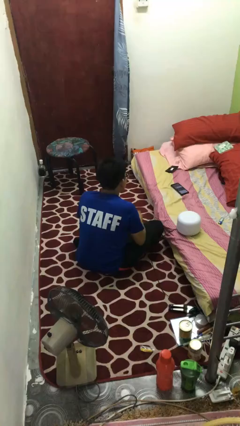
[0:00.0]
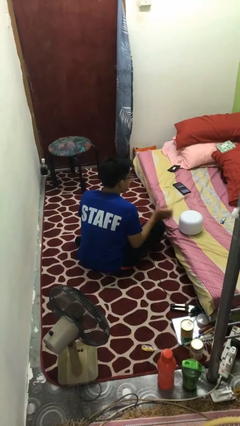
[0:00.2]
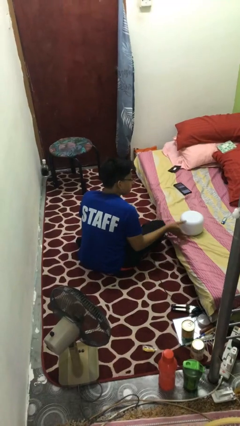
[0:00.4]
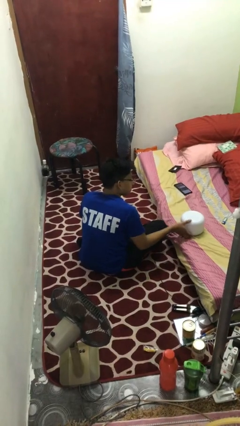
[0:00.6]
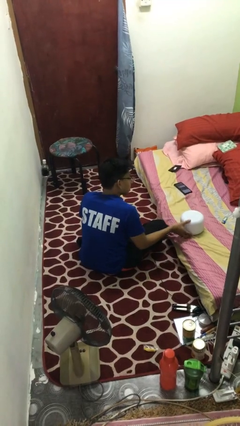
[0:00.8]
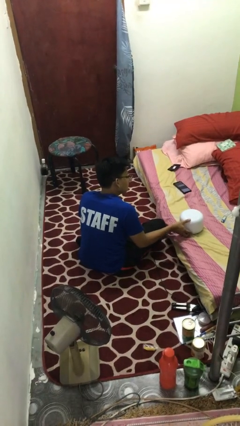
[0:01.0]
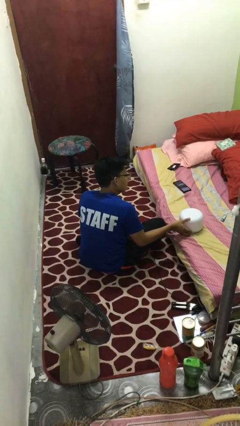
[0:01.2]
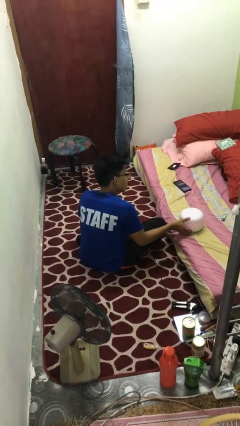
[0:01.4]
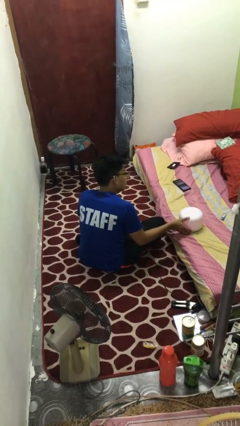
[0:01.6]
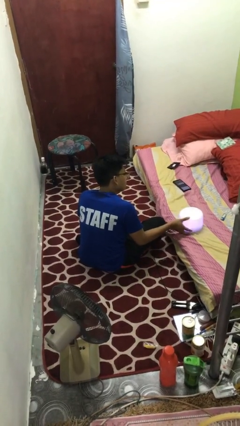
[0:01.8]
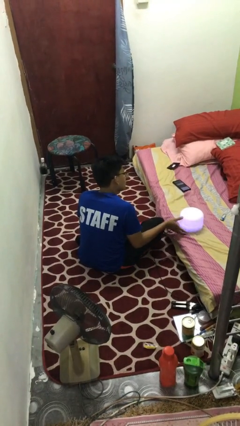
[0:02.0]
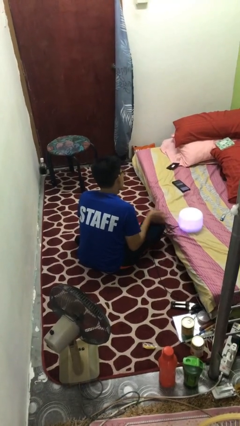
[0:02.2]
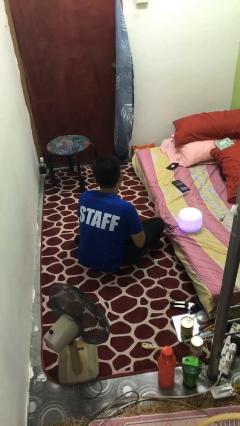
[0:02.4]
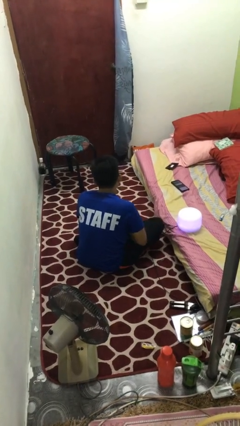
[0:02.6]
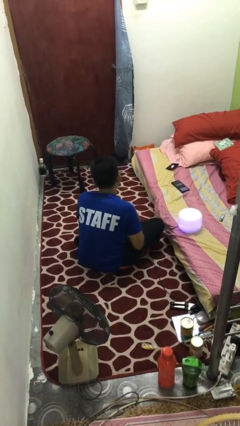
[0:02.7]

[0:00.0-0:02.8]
person turns on lamp

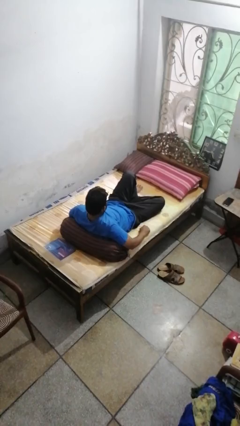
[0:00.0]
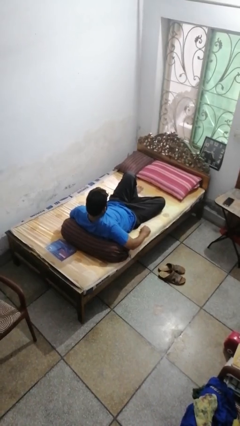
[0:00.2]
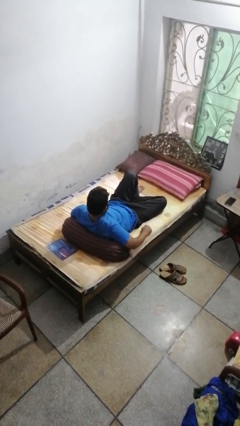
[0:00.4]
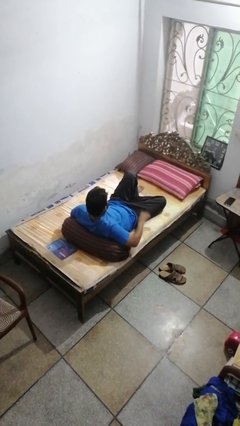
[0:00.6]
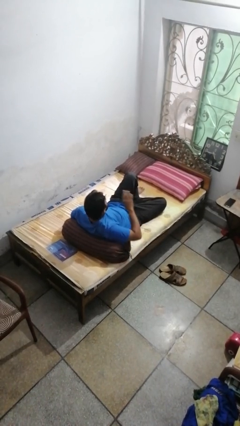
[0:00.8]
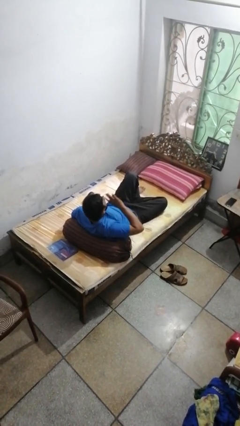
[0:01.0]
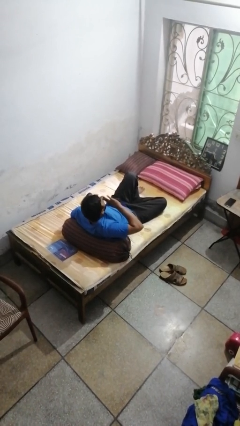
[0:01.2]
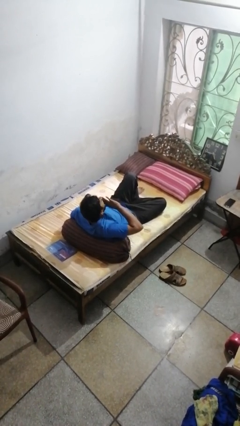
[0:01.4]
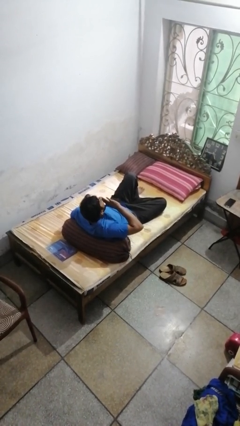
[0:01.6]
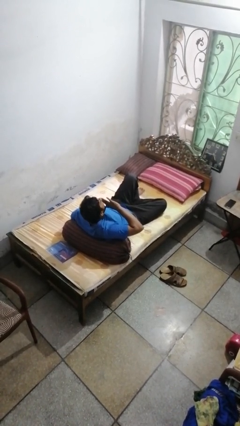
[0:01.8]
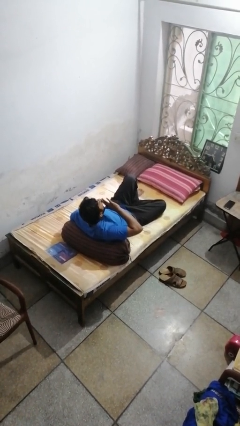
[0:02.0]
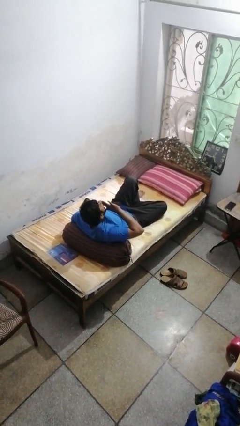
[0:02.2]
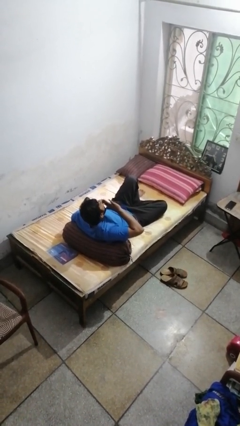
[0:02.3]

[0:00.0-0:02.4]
person yawns

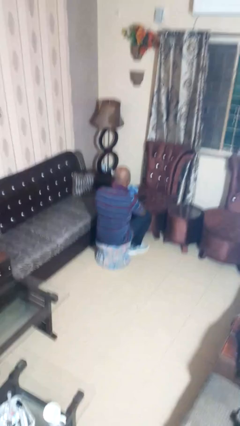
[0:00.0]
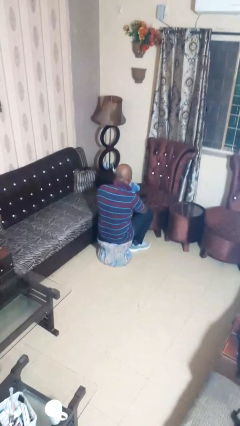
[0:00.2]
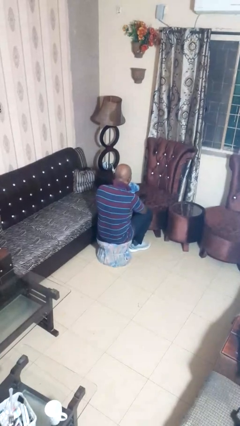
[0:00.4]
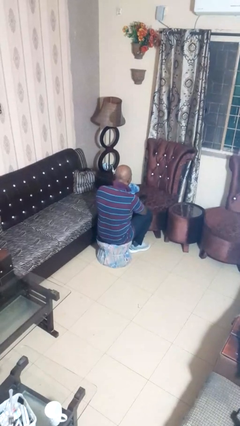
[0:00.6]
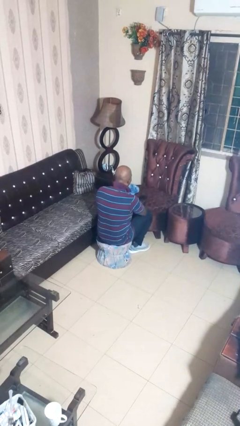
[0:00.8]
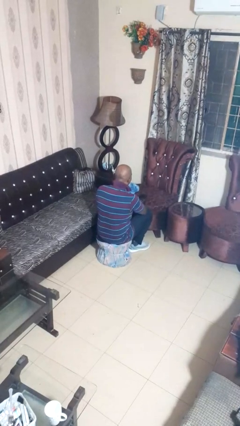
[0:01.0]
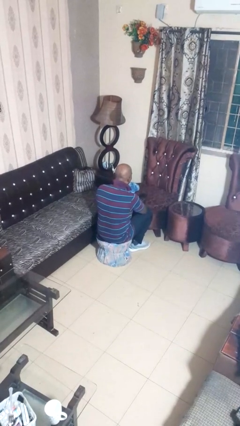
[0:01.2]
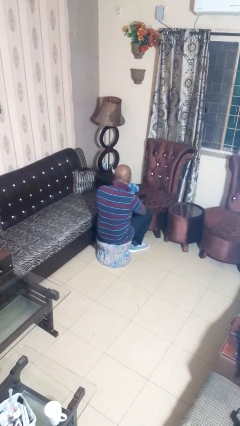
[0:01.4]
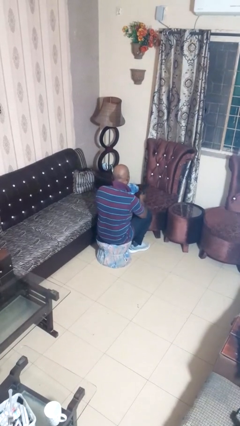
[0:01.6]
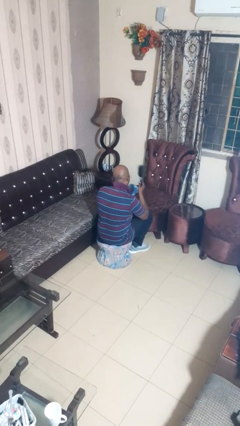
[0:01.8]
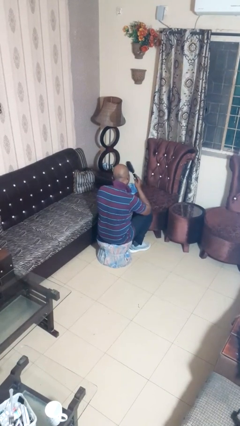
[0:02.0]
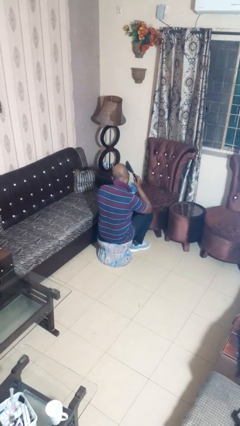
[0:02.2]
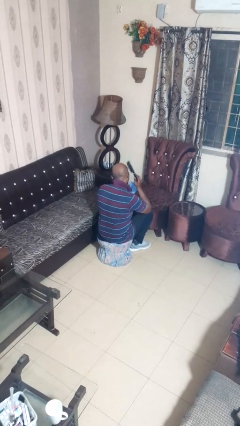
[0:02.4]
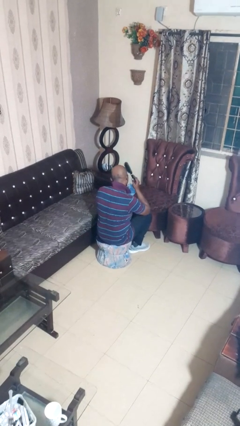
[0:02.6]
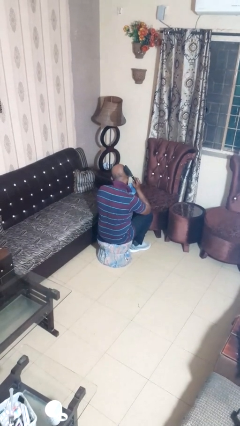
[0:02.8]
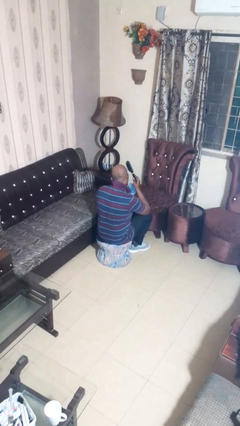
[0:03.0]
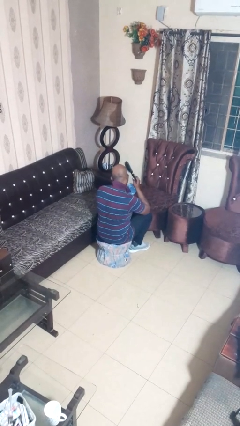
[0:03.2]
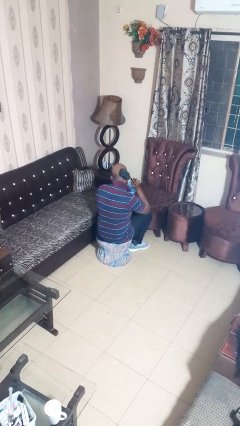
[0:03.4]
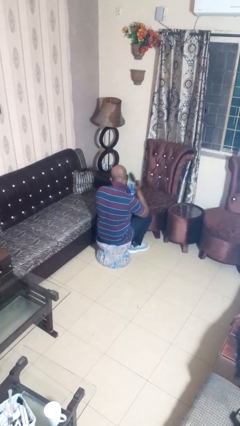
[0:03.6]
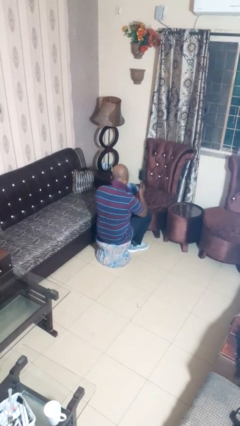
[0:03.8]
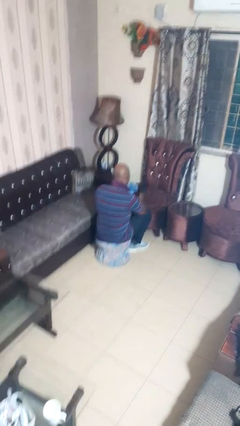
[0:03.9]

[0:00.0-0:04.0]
person brushes hair

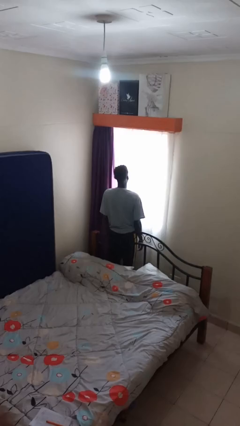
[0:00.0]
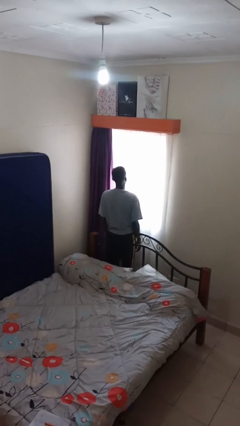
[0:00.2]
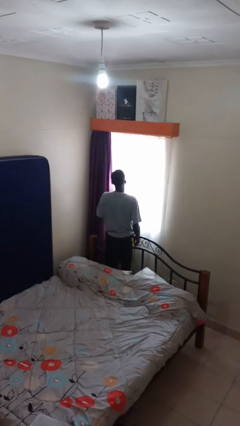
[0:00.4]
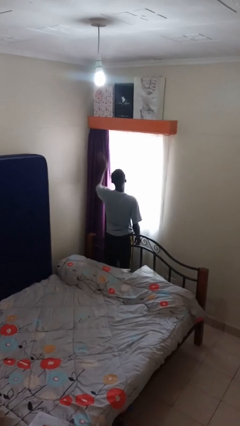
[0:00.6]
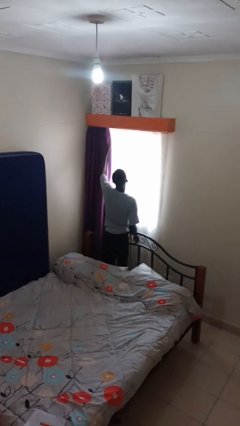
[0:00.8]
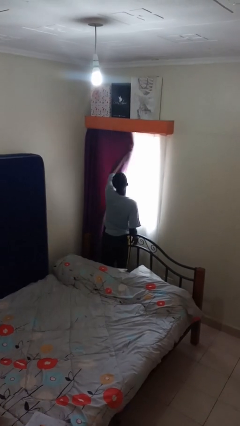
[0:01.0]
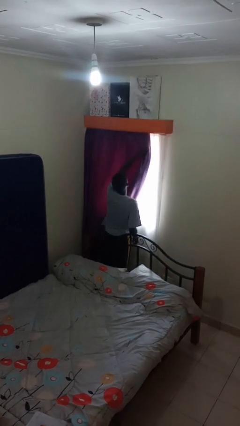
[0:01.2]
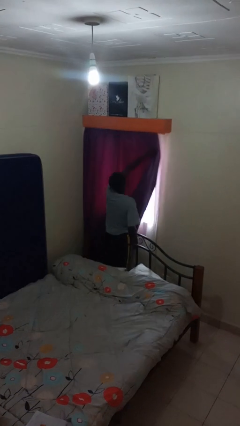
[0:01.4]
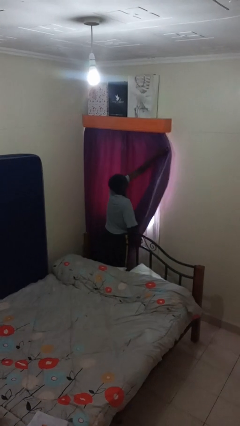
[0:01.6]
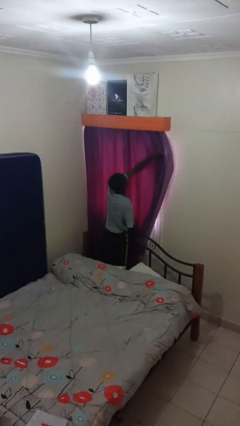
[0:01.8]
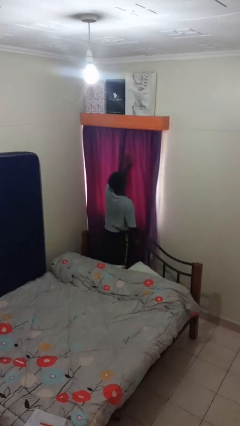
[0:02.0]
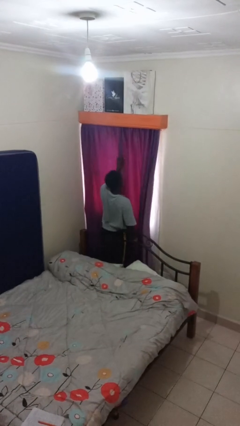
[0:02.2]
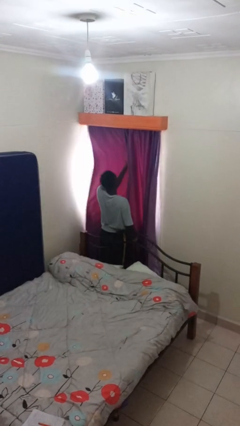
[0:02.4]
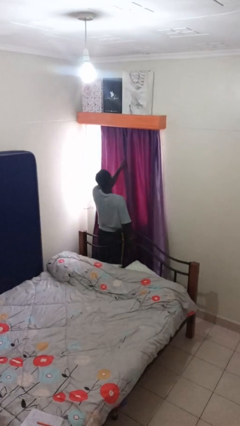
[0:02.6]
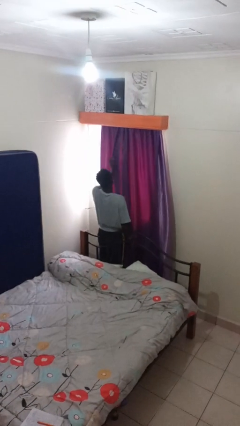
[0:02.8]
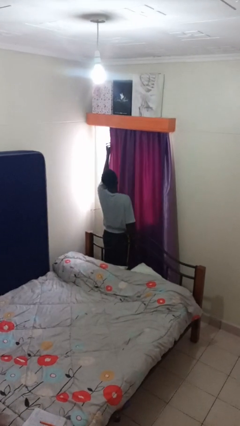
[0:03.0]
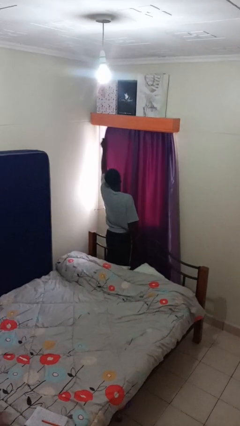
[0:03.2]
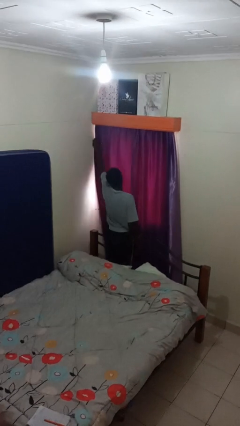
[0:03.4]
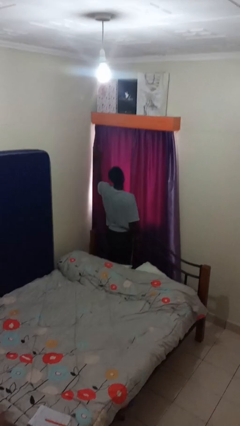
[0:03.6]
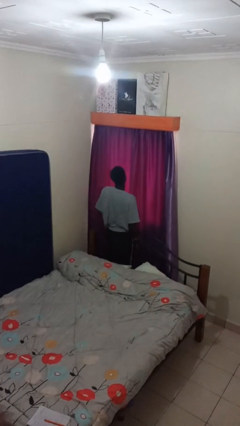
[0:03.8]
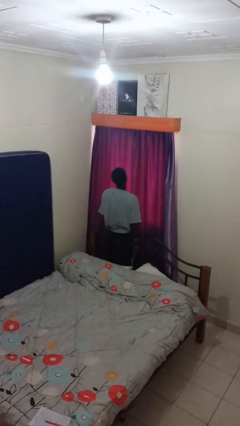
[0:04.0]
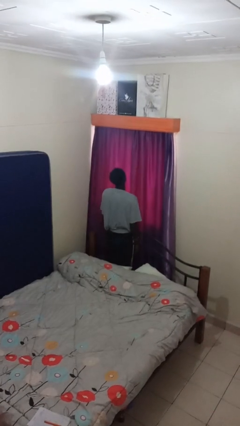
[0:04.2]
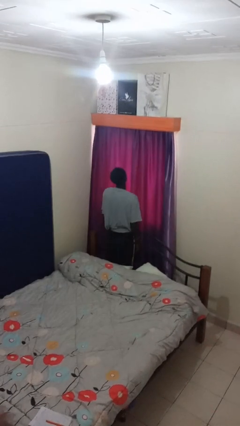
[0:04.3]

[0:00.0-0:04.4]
person closes curtains

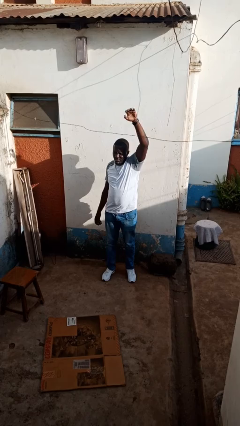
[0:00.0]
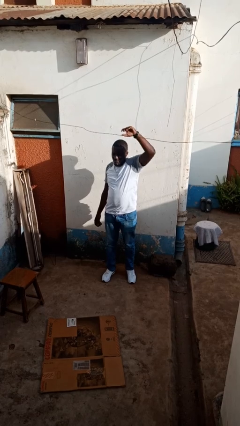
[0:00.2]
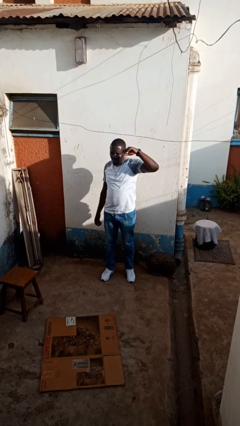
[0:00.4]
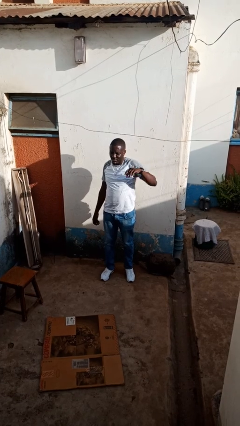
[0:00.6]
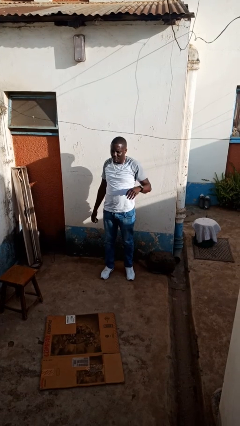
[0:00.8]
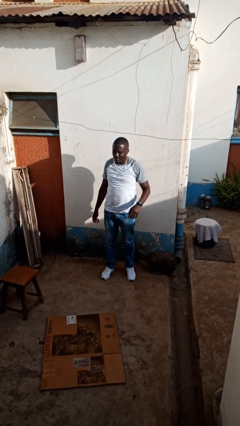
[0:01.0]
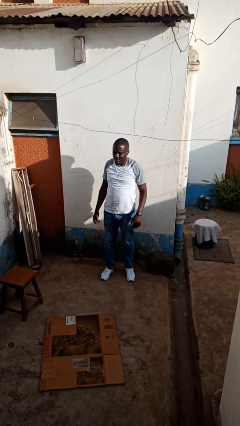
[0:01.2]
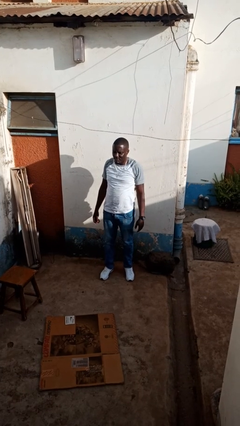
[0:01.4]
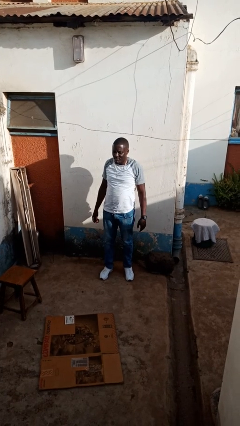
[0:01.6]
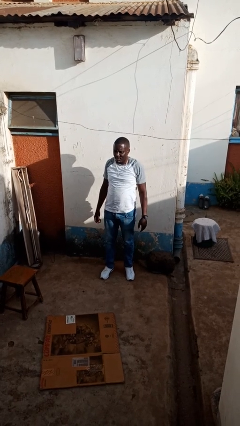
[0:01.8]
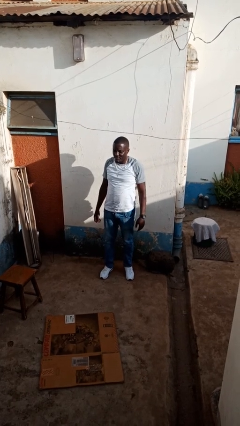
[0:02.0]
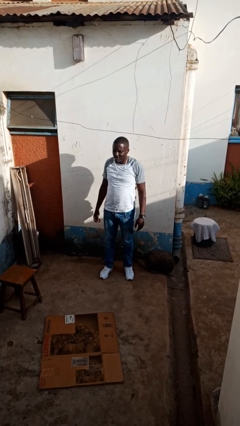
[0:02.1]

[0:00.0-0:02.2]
person gestures lower hand

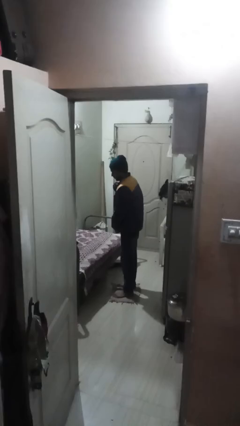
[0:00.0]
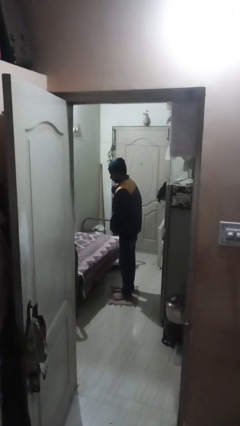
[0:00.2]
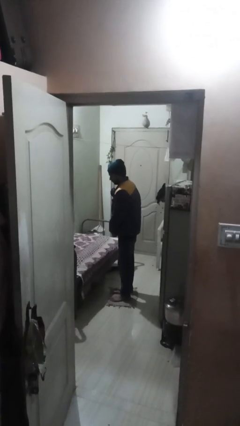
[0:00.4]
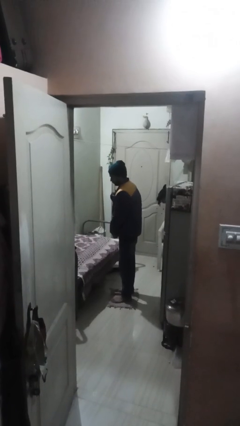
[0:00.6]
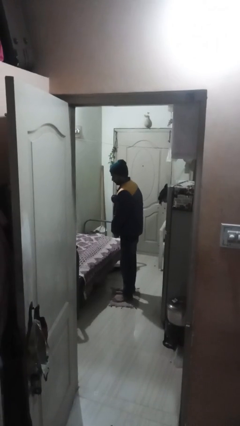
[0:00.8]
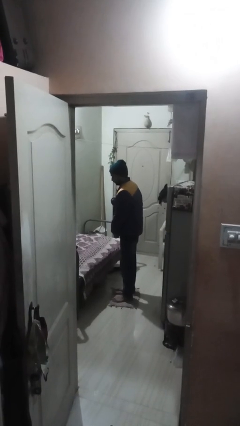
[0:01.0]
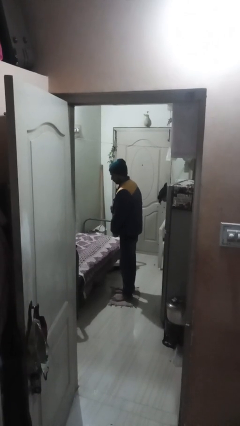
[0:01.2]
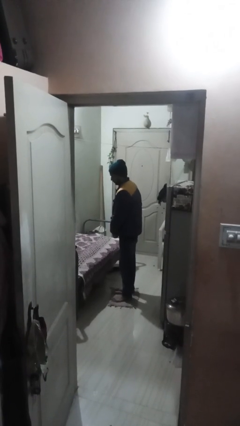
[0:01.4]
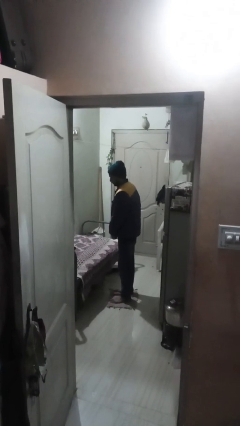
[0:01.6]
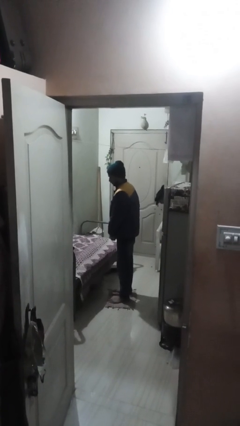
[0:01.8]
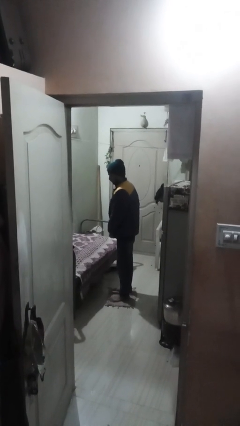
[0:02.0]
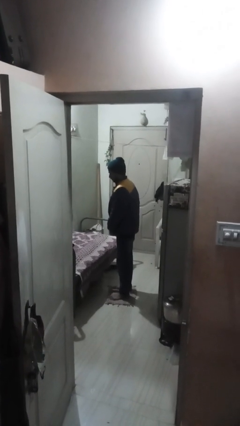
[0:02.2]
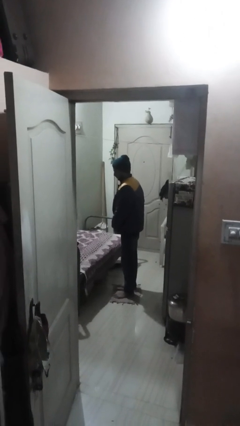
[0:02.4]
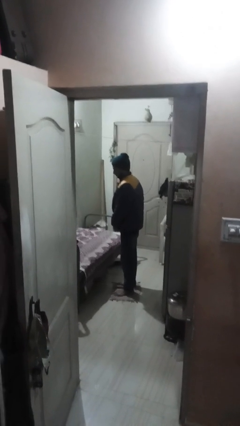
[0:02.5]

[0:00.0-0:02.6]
person unzips jacket
